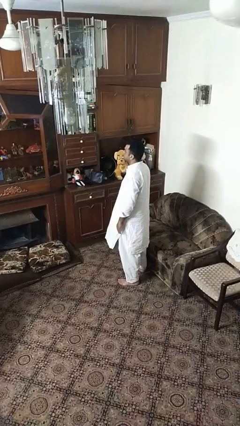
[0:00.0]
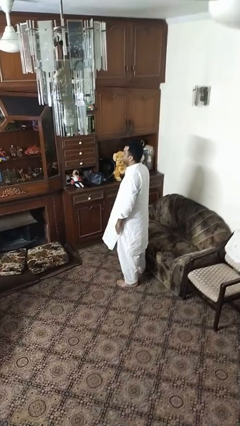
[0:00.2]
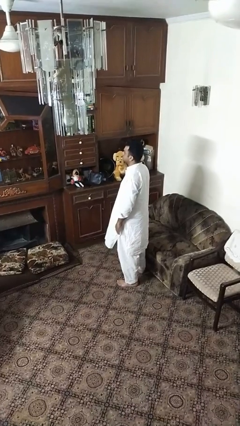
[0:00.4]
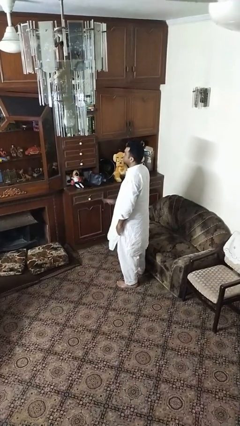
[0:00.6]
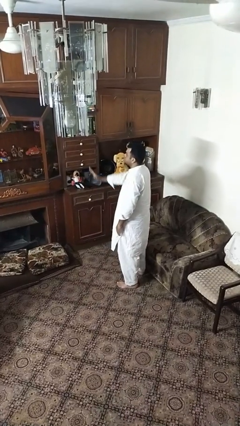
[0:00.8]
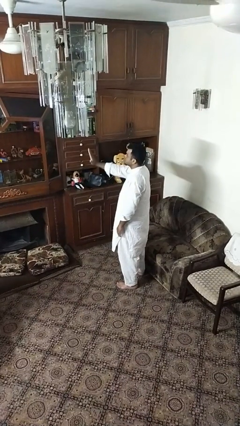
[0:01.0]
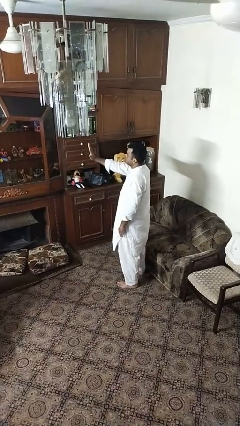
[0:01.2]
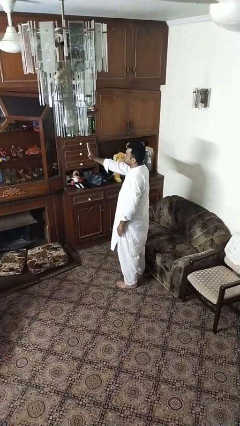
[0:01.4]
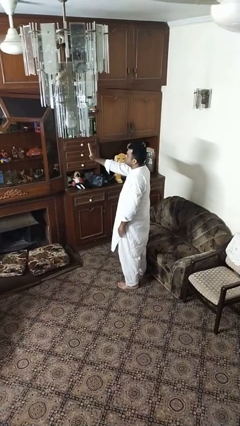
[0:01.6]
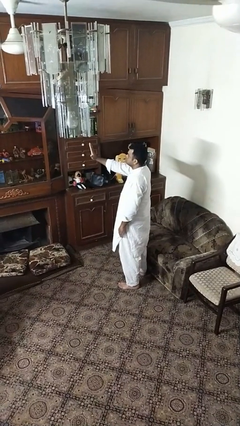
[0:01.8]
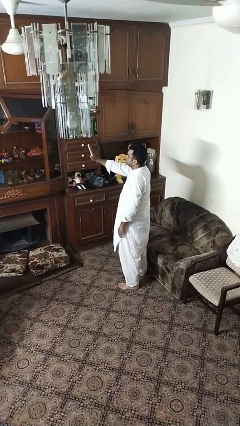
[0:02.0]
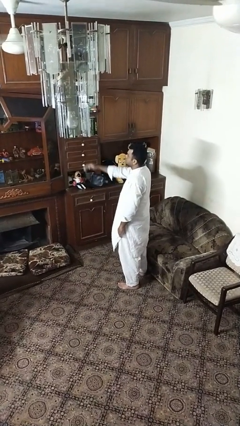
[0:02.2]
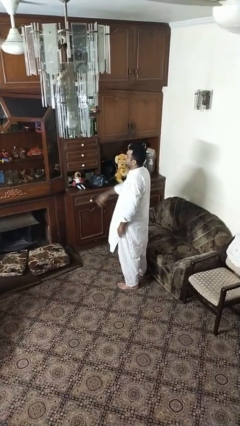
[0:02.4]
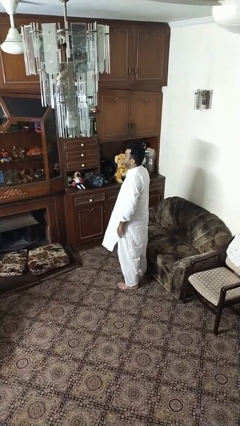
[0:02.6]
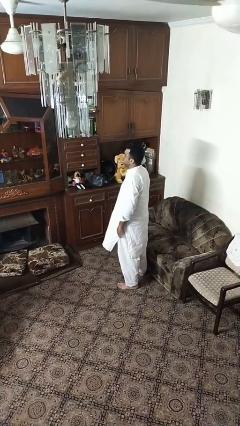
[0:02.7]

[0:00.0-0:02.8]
person gestures stop

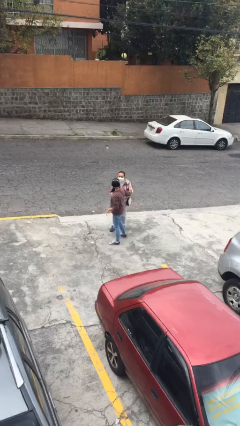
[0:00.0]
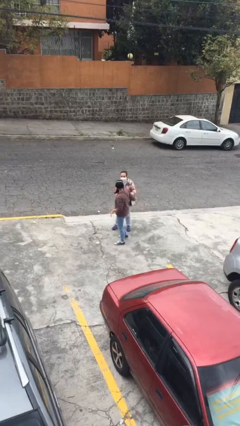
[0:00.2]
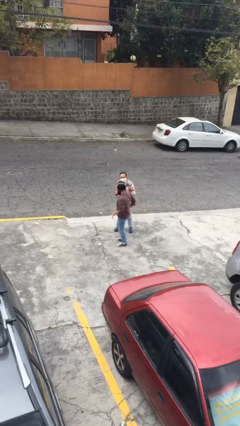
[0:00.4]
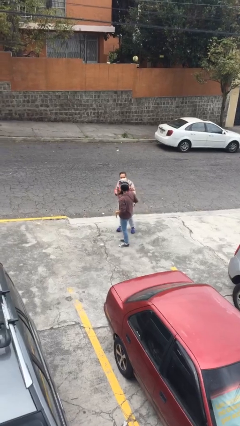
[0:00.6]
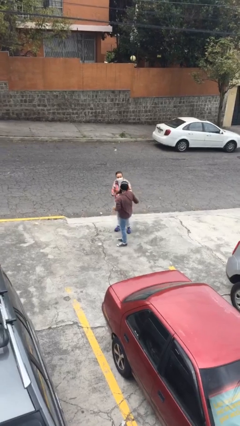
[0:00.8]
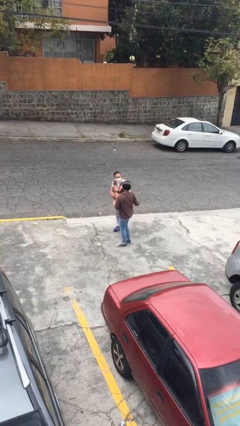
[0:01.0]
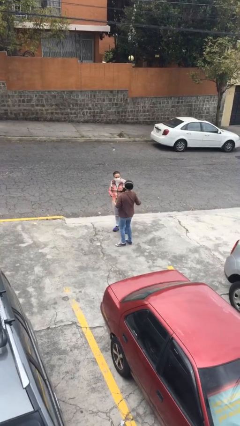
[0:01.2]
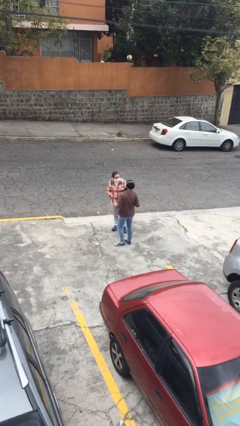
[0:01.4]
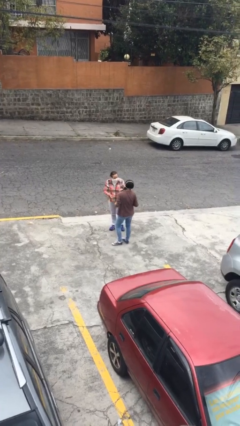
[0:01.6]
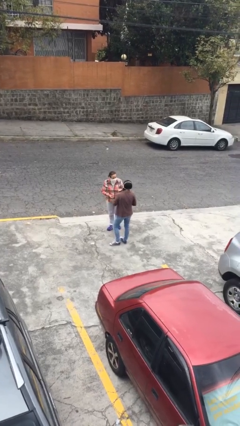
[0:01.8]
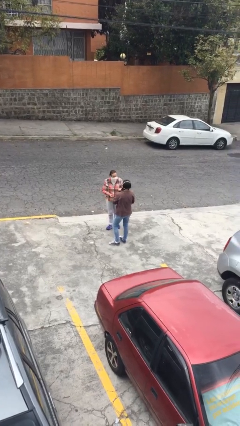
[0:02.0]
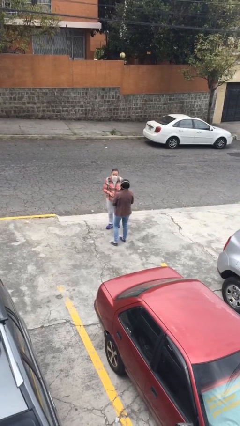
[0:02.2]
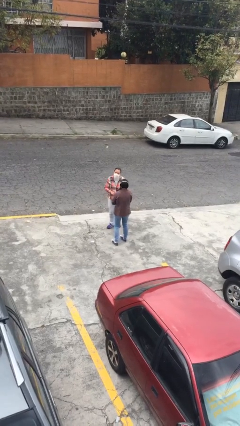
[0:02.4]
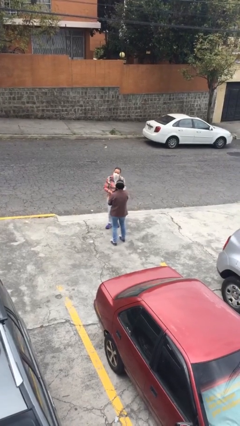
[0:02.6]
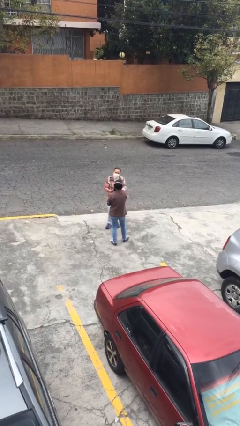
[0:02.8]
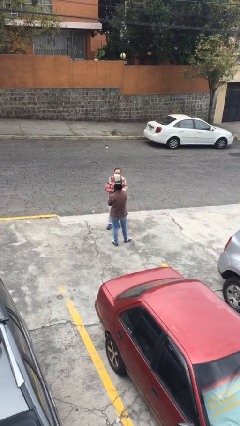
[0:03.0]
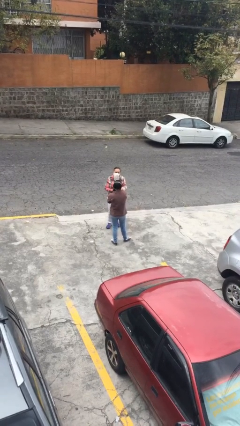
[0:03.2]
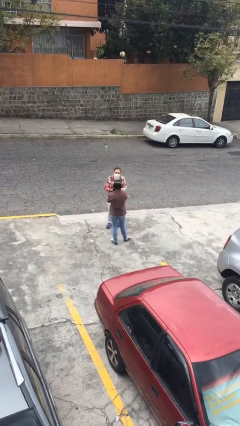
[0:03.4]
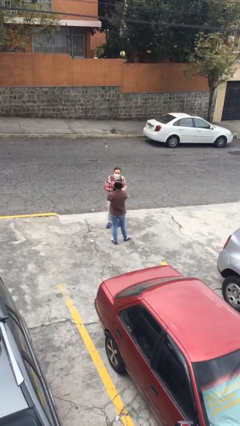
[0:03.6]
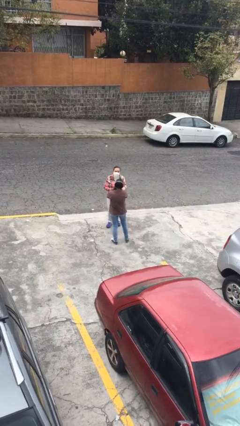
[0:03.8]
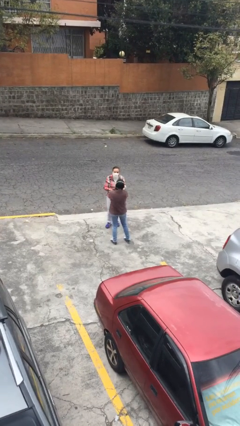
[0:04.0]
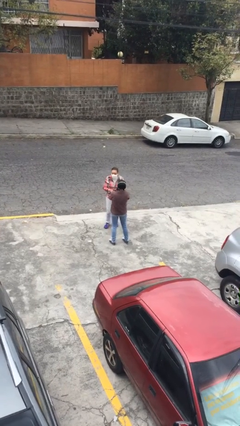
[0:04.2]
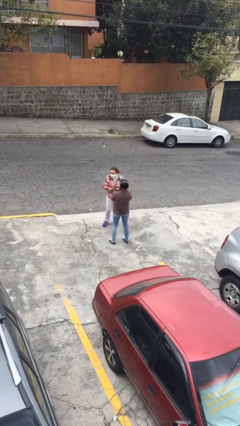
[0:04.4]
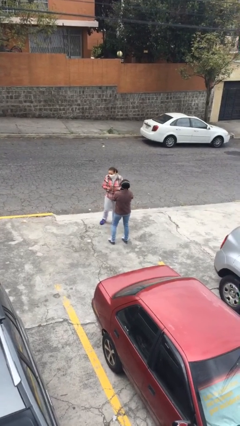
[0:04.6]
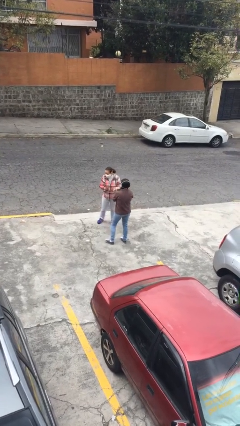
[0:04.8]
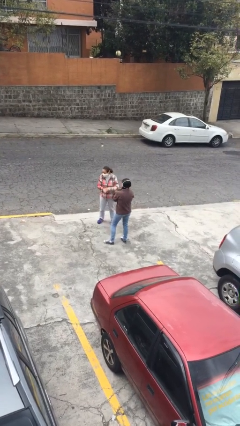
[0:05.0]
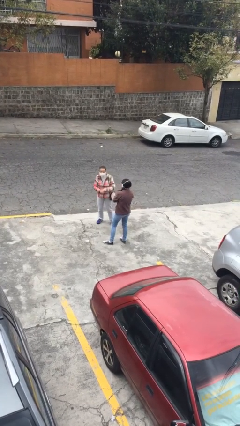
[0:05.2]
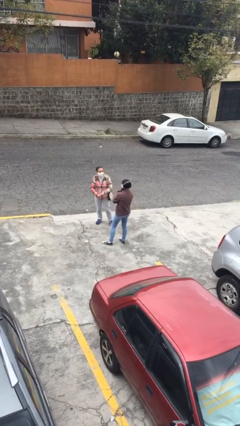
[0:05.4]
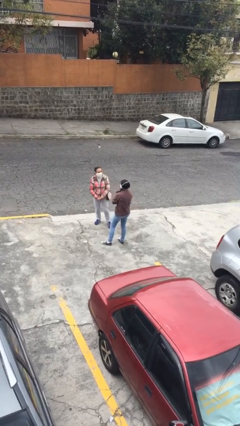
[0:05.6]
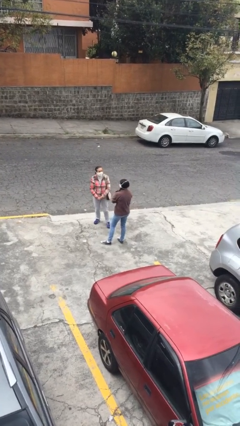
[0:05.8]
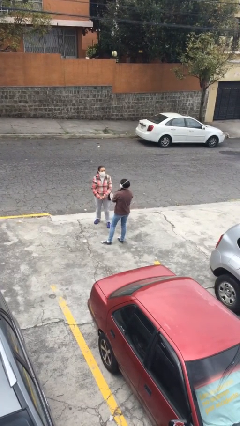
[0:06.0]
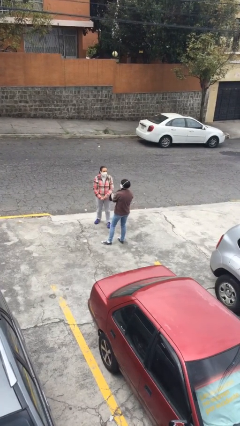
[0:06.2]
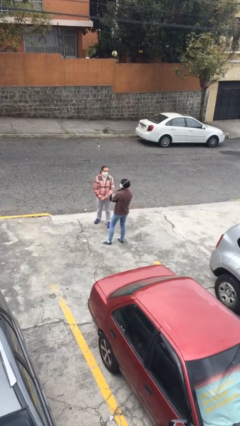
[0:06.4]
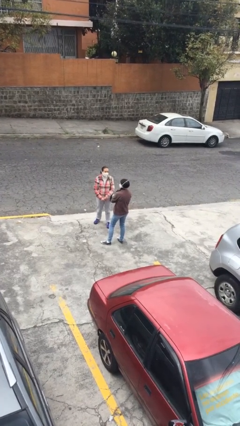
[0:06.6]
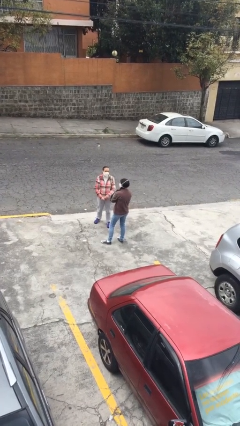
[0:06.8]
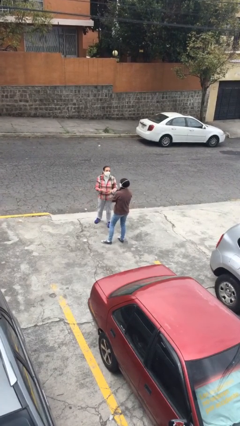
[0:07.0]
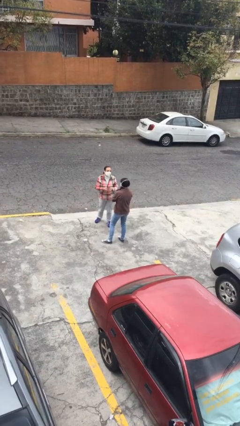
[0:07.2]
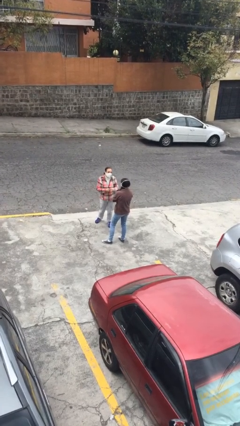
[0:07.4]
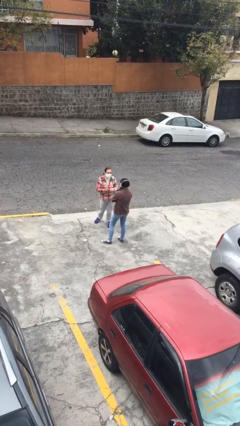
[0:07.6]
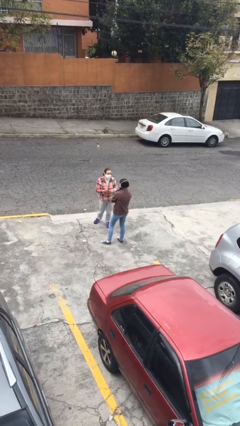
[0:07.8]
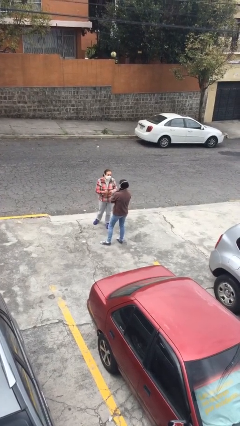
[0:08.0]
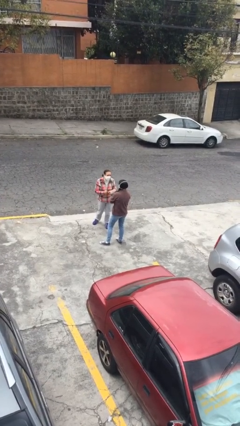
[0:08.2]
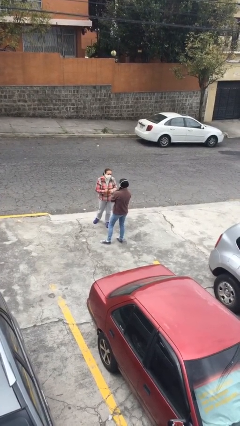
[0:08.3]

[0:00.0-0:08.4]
person talks to person

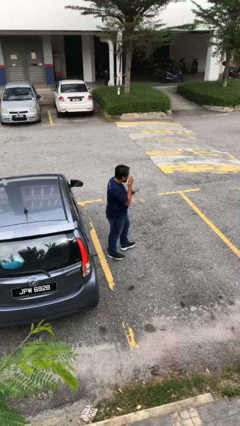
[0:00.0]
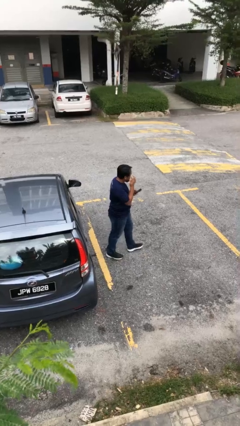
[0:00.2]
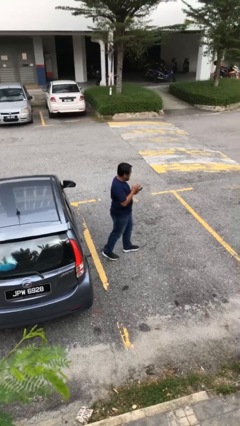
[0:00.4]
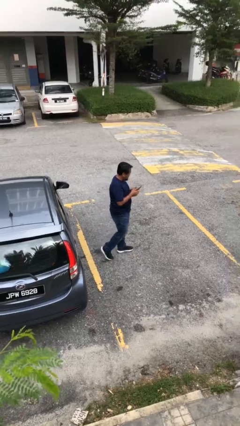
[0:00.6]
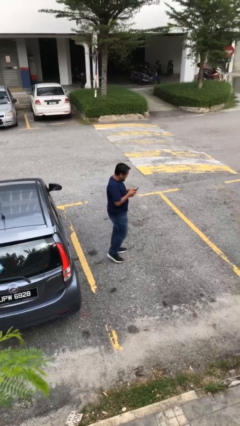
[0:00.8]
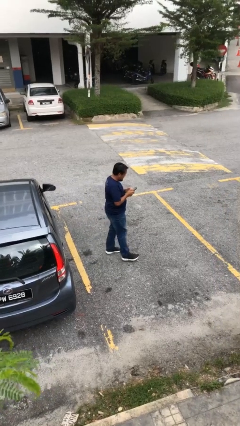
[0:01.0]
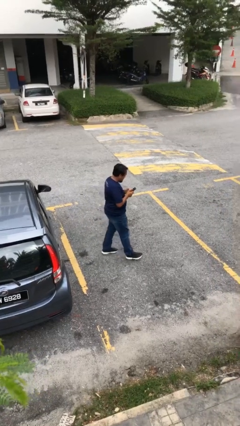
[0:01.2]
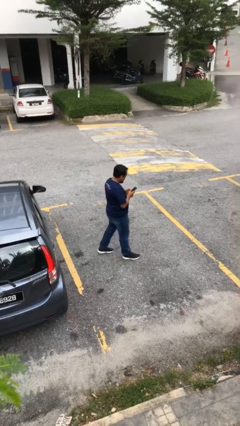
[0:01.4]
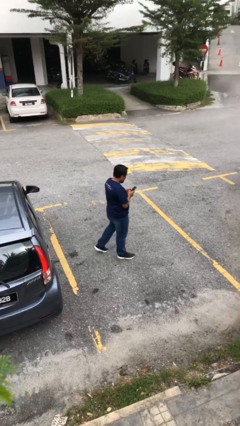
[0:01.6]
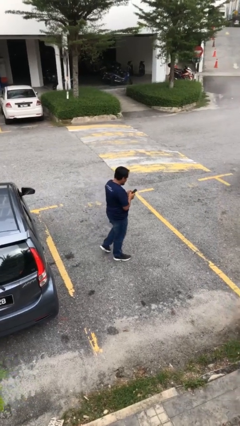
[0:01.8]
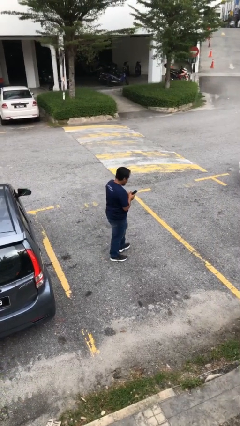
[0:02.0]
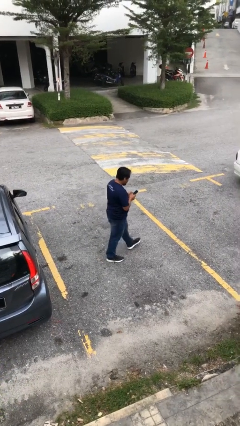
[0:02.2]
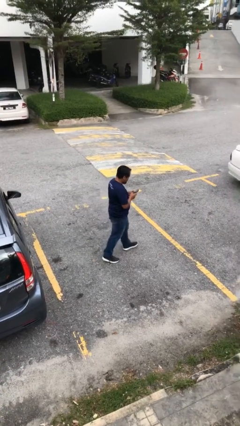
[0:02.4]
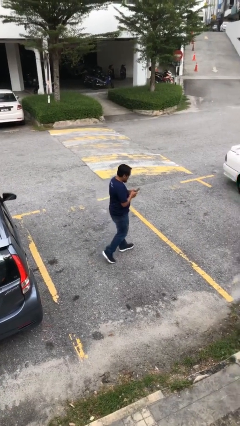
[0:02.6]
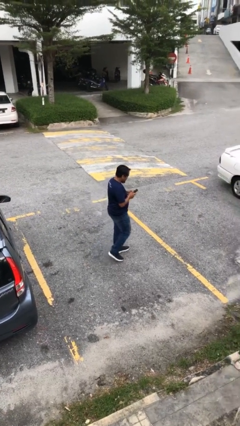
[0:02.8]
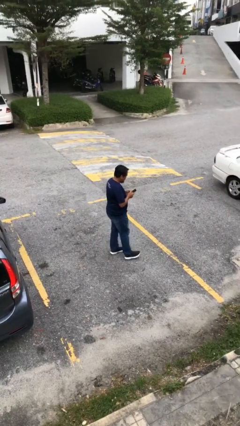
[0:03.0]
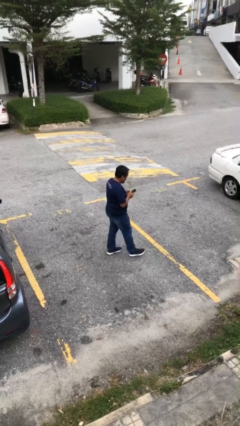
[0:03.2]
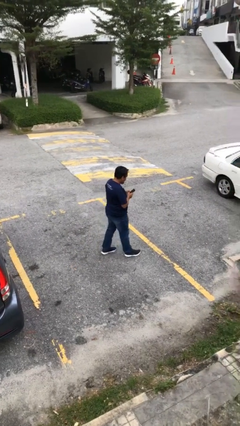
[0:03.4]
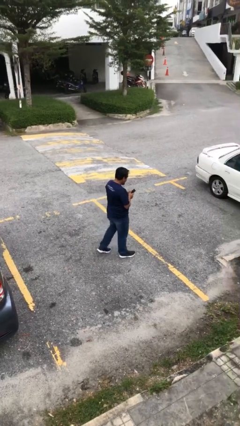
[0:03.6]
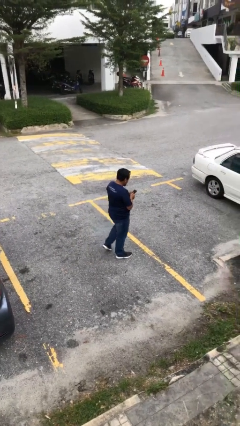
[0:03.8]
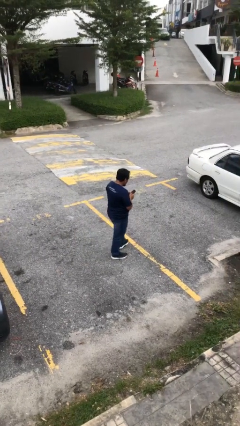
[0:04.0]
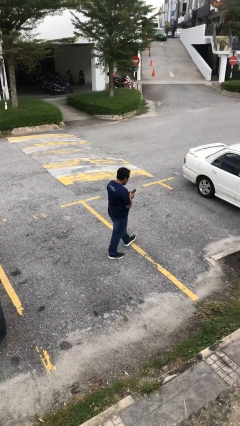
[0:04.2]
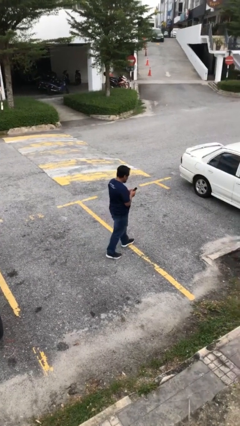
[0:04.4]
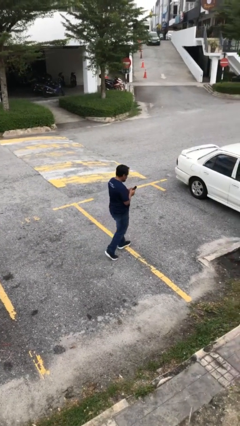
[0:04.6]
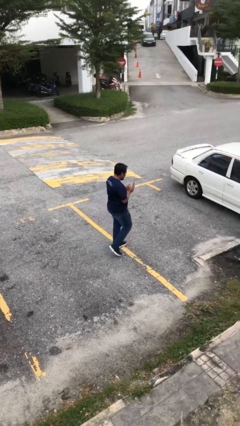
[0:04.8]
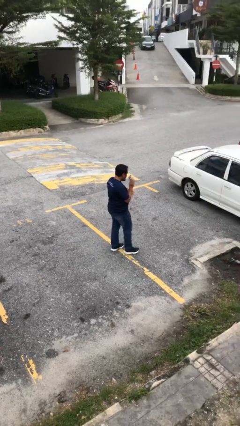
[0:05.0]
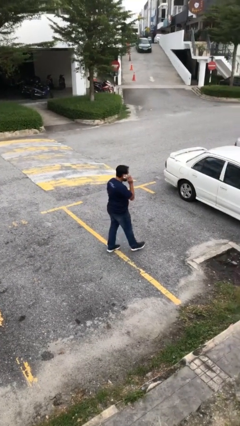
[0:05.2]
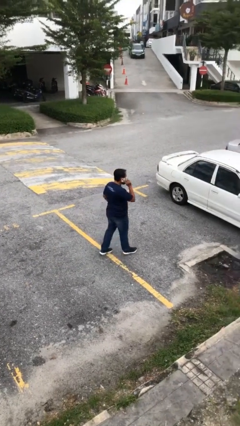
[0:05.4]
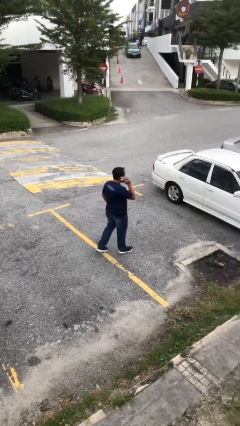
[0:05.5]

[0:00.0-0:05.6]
person texts on phone

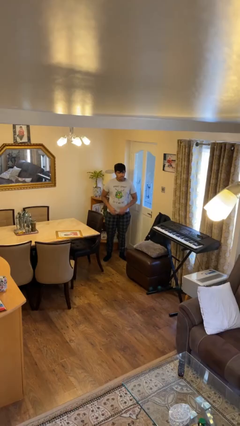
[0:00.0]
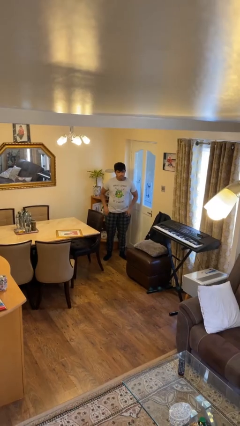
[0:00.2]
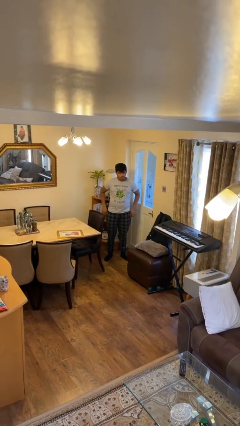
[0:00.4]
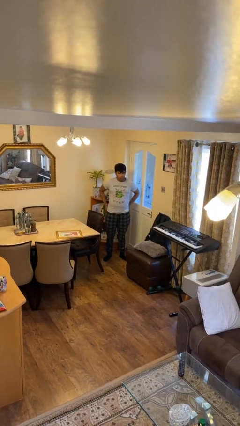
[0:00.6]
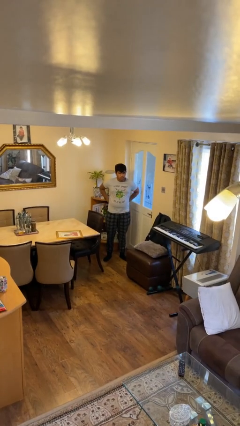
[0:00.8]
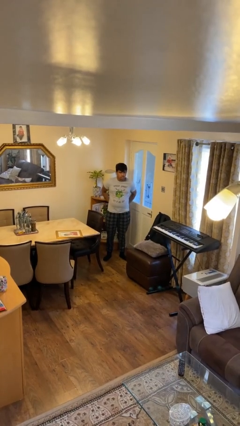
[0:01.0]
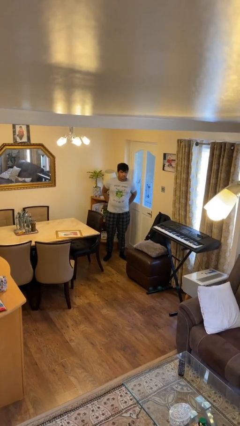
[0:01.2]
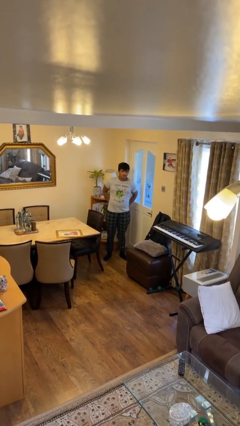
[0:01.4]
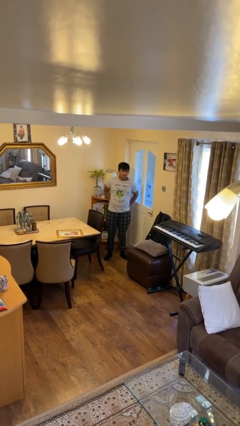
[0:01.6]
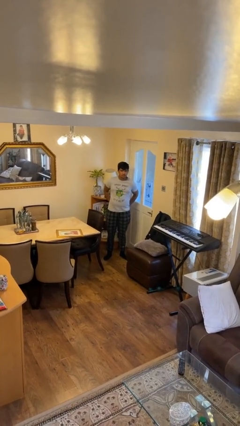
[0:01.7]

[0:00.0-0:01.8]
person puts hands in back pockets
